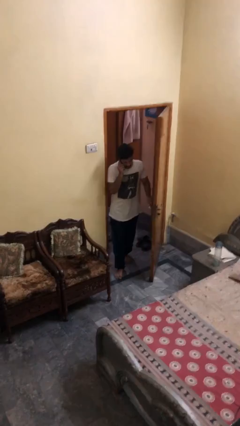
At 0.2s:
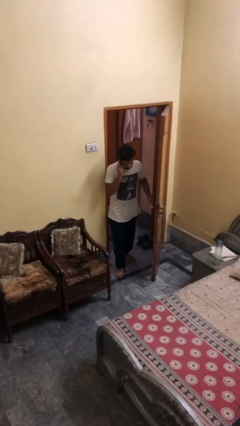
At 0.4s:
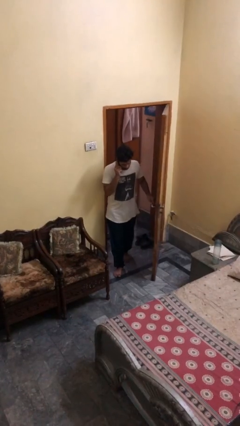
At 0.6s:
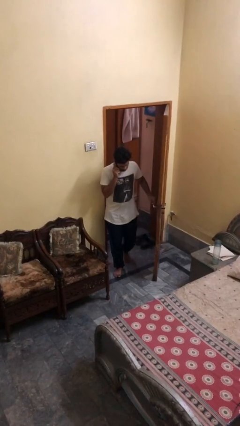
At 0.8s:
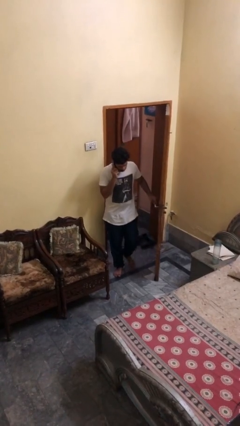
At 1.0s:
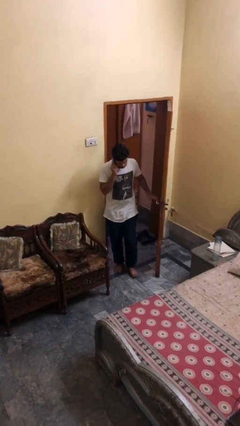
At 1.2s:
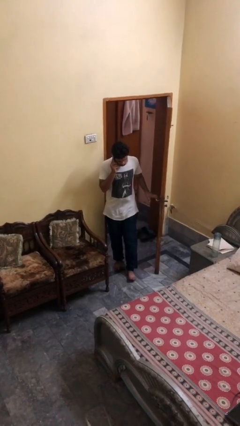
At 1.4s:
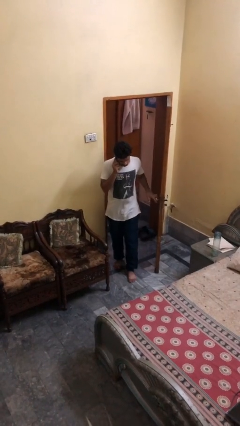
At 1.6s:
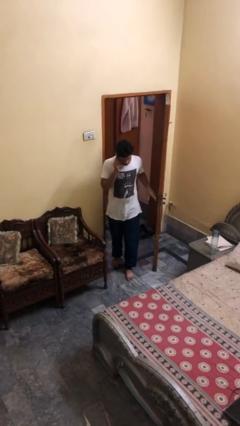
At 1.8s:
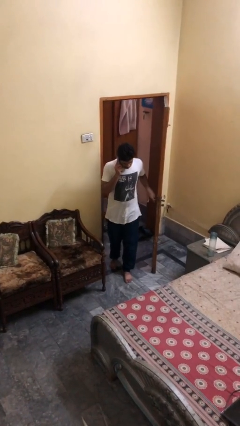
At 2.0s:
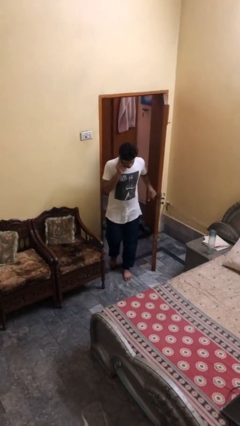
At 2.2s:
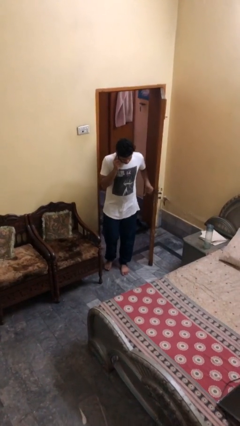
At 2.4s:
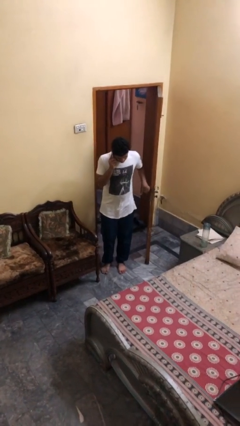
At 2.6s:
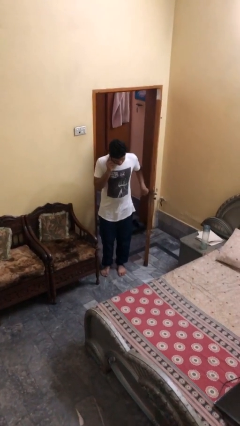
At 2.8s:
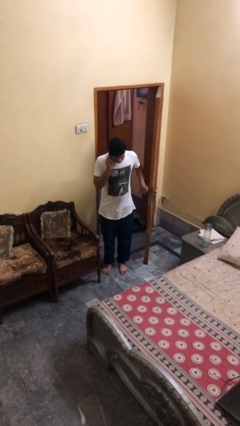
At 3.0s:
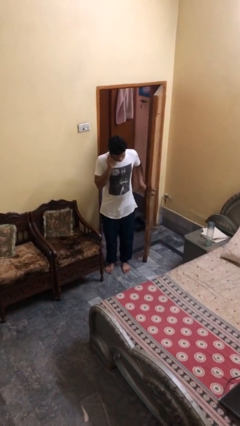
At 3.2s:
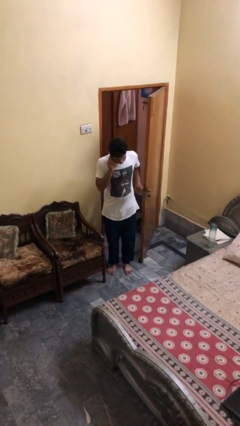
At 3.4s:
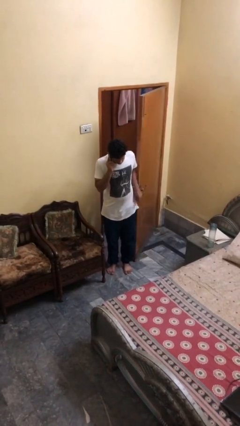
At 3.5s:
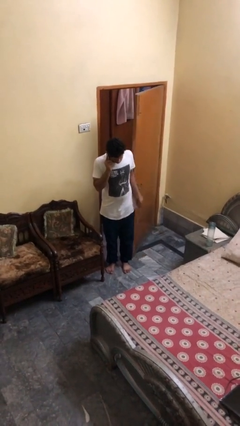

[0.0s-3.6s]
person enters scene through structure

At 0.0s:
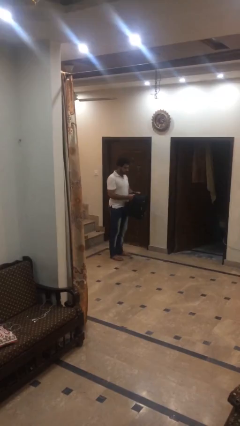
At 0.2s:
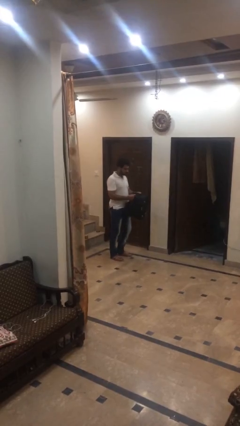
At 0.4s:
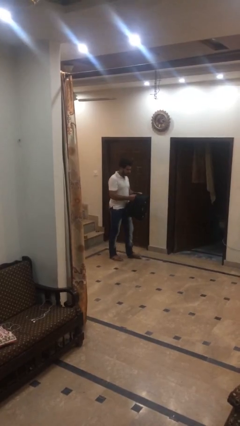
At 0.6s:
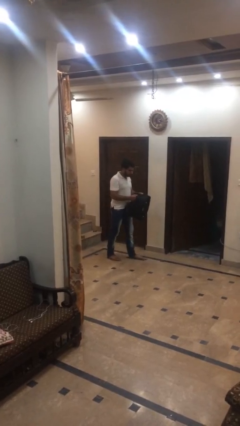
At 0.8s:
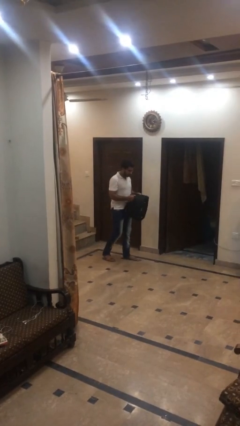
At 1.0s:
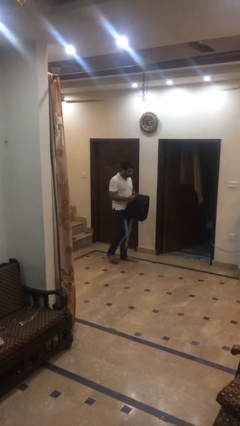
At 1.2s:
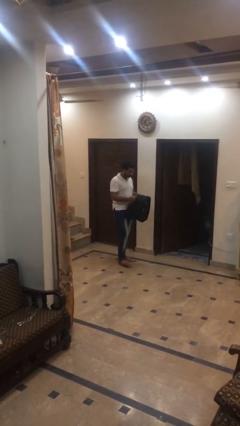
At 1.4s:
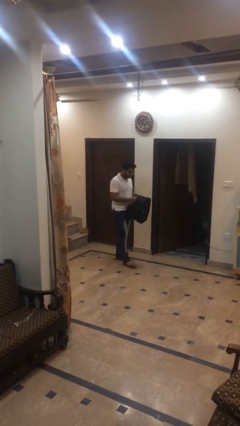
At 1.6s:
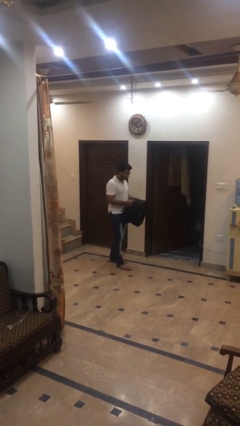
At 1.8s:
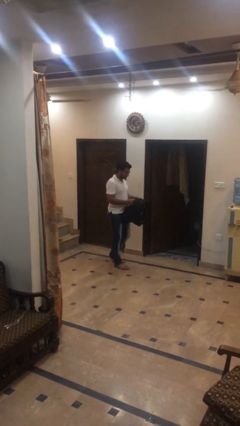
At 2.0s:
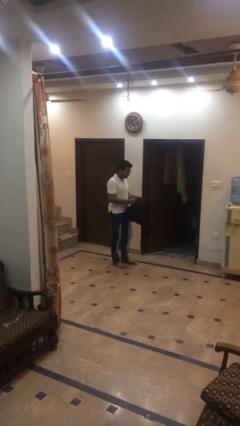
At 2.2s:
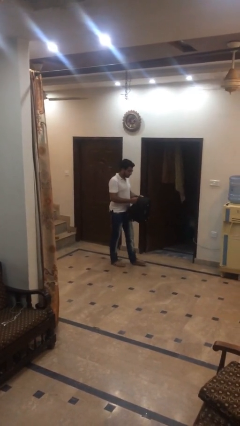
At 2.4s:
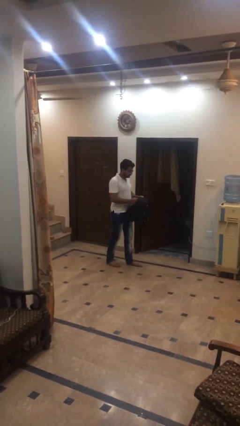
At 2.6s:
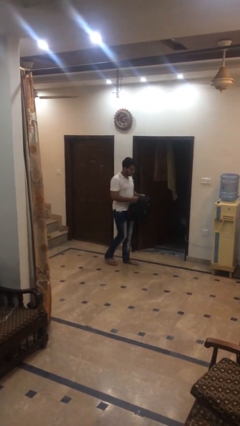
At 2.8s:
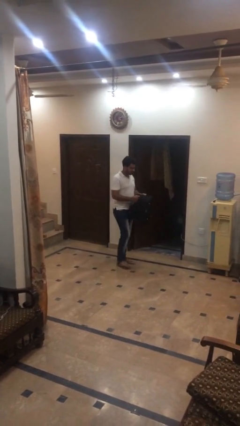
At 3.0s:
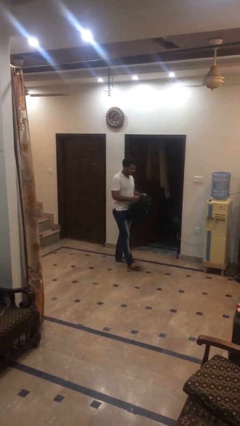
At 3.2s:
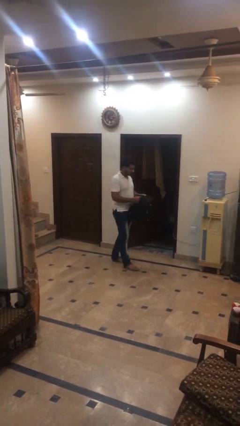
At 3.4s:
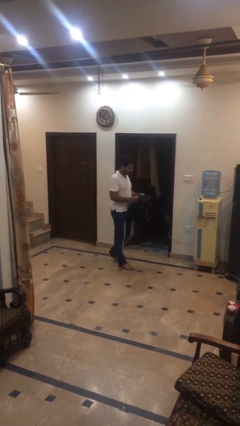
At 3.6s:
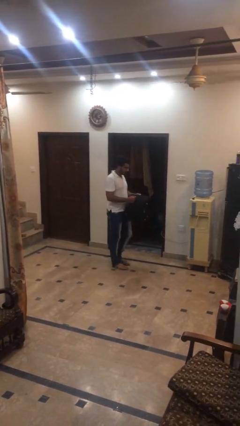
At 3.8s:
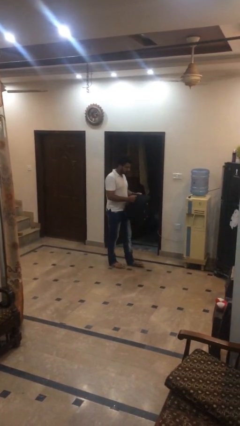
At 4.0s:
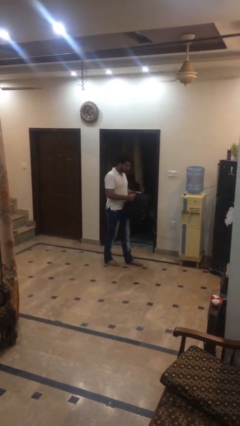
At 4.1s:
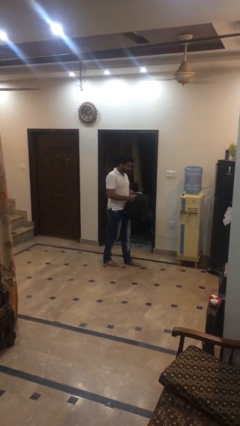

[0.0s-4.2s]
person carries heavy object

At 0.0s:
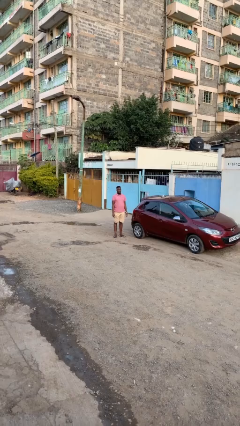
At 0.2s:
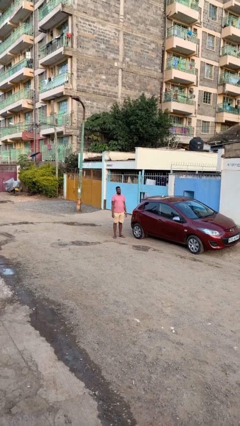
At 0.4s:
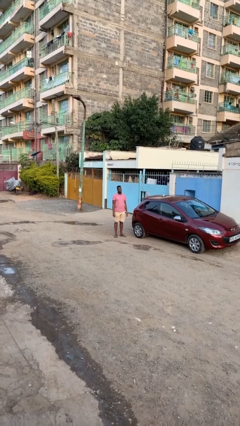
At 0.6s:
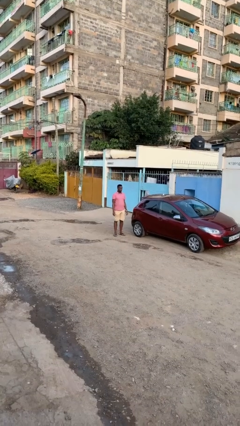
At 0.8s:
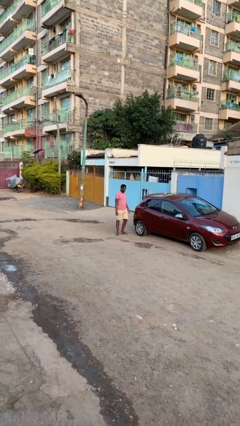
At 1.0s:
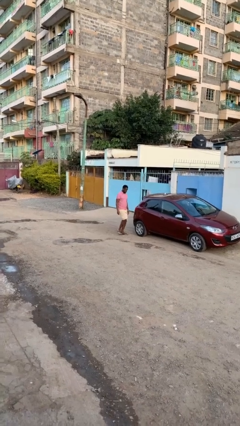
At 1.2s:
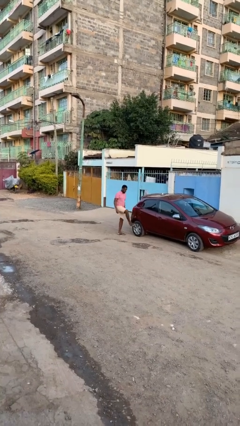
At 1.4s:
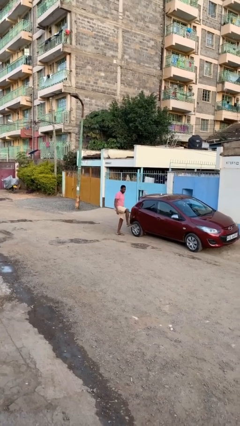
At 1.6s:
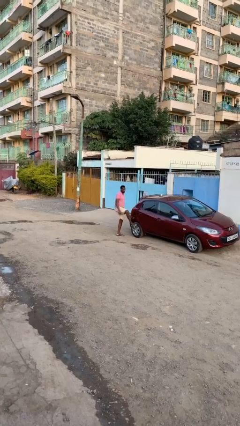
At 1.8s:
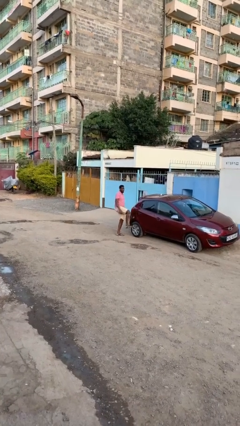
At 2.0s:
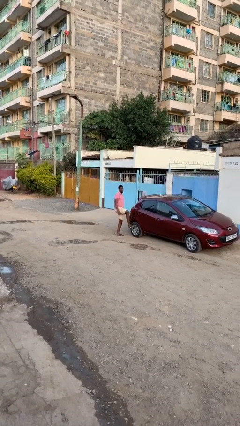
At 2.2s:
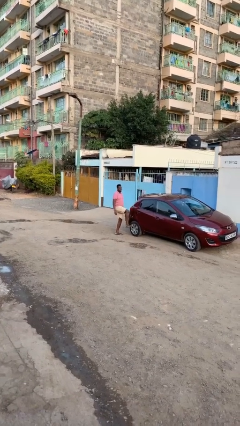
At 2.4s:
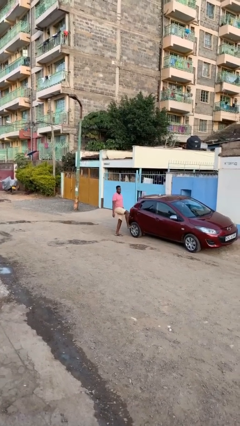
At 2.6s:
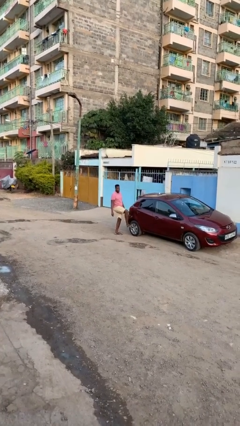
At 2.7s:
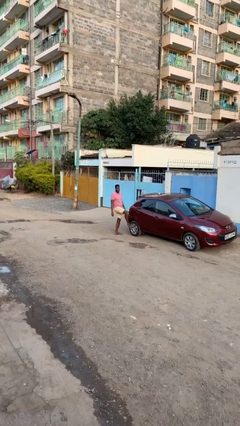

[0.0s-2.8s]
person kicks car tires

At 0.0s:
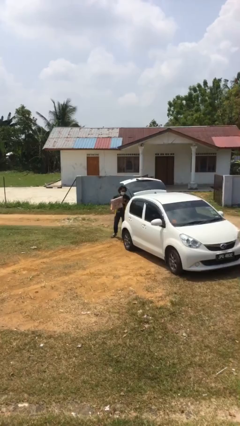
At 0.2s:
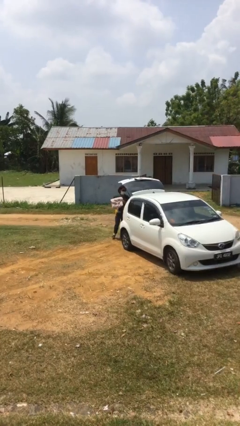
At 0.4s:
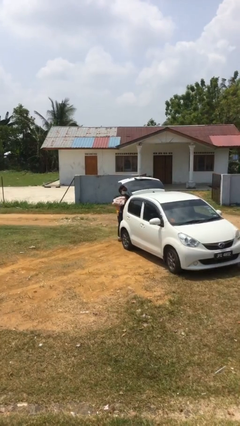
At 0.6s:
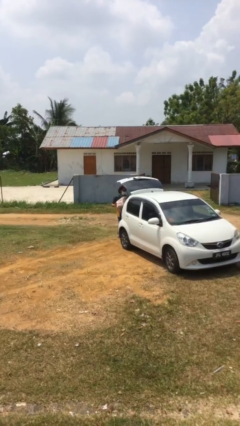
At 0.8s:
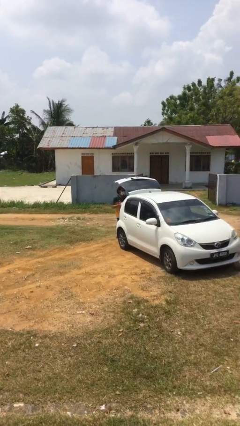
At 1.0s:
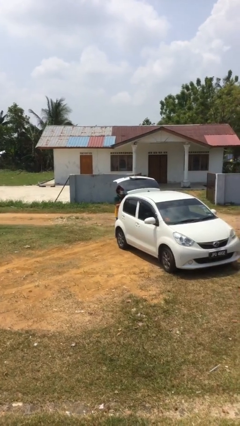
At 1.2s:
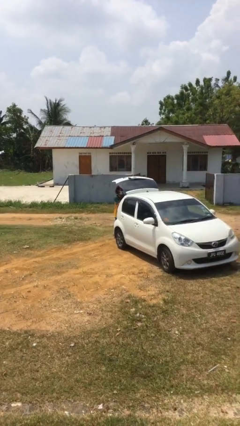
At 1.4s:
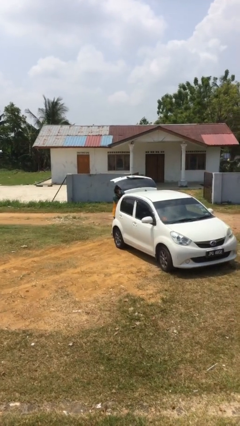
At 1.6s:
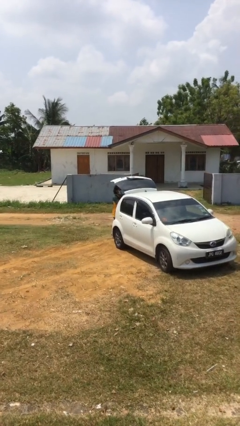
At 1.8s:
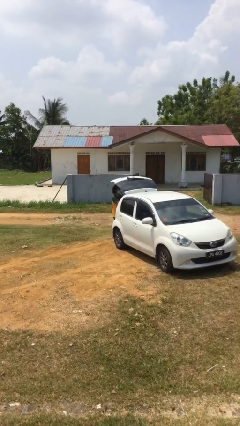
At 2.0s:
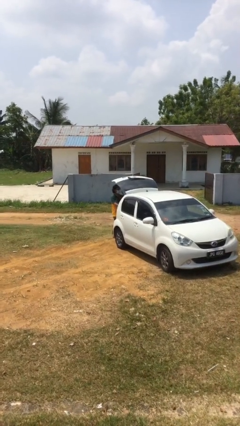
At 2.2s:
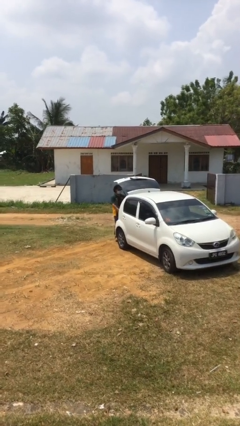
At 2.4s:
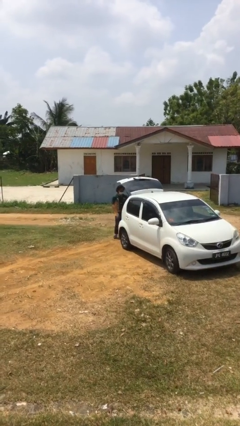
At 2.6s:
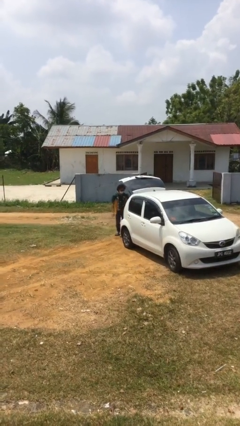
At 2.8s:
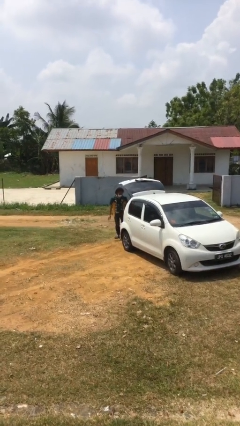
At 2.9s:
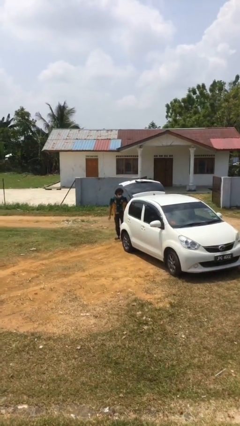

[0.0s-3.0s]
person loads car

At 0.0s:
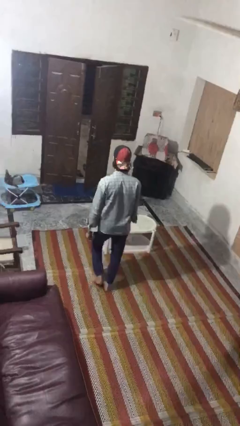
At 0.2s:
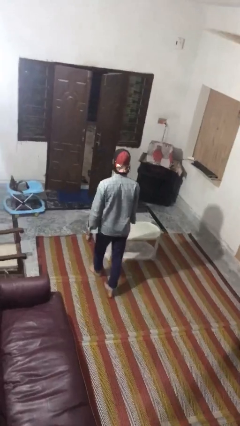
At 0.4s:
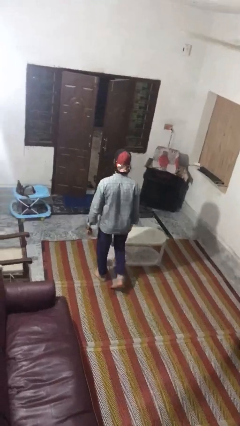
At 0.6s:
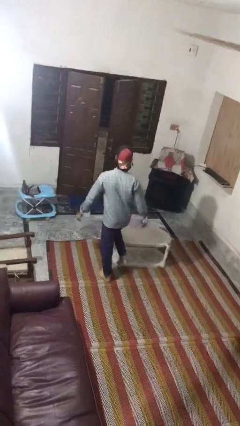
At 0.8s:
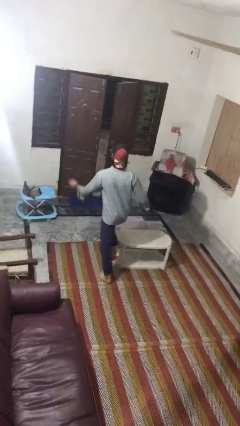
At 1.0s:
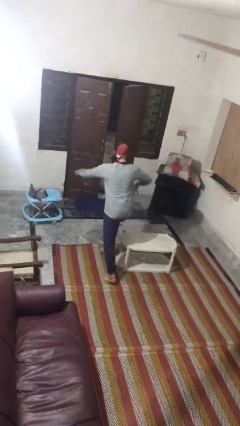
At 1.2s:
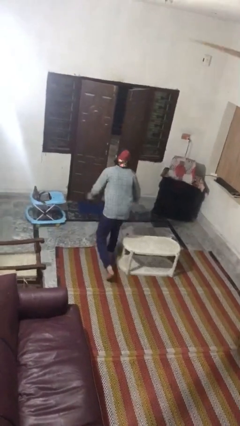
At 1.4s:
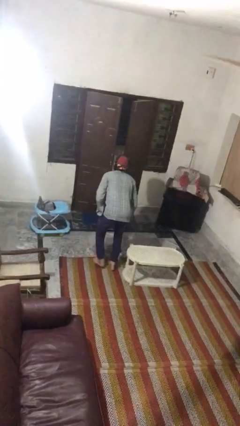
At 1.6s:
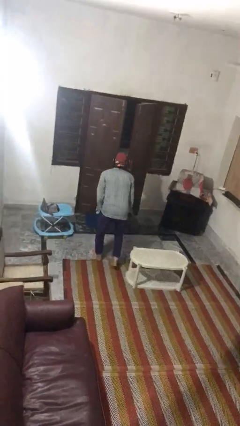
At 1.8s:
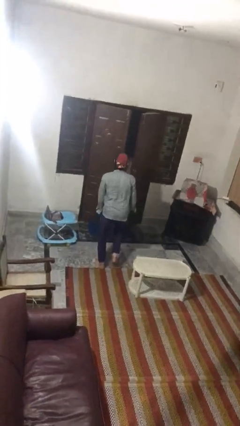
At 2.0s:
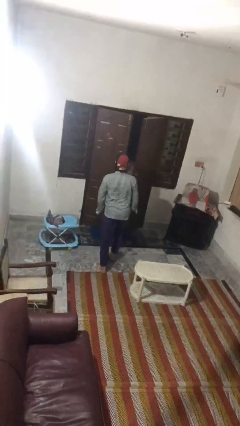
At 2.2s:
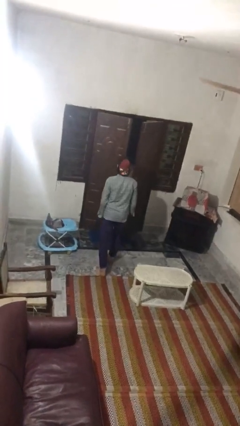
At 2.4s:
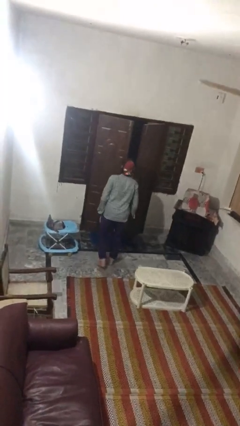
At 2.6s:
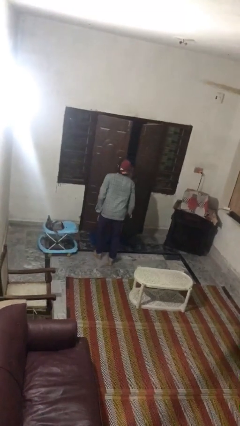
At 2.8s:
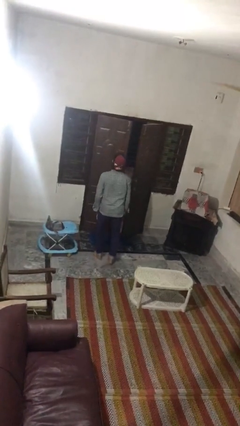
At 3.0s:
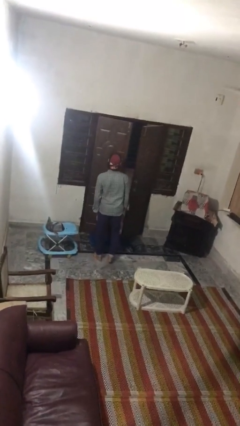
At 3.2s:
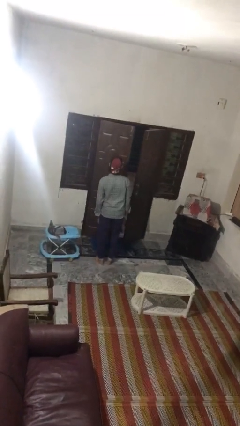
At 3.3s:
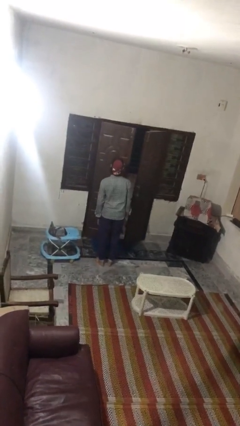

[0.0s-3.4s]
person bumps into table

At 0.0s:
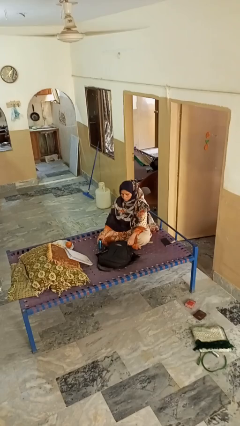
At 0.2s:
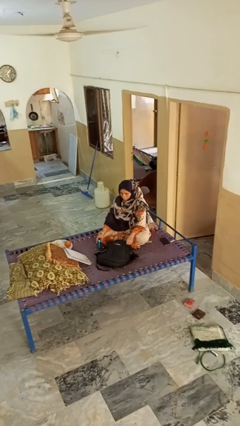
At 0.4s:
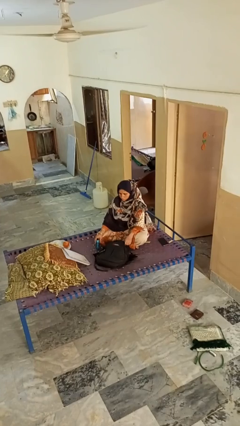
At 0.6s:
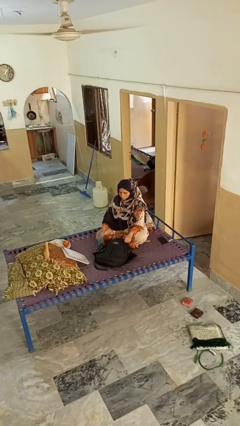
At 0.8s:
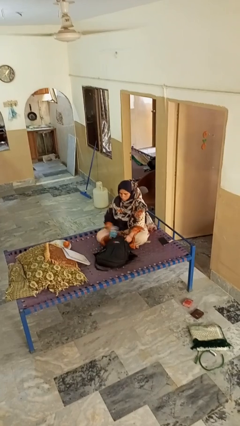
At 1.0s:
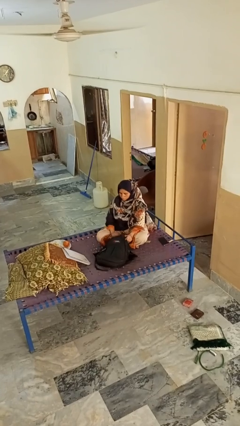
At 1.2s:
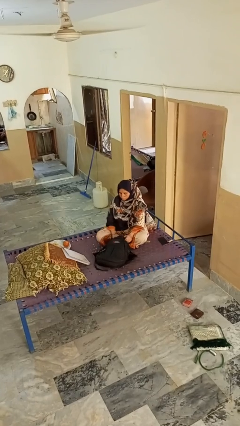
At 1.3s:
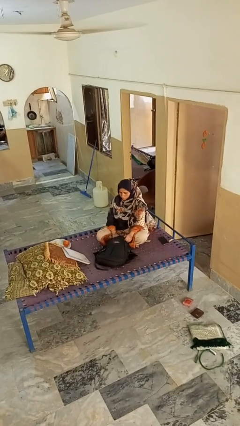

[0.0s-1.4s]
person puts object into bag
